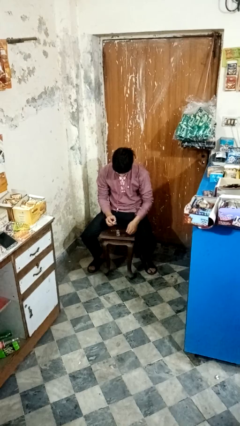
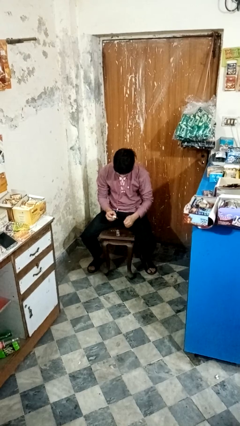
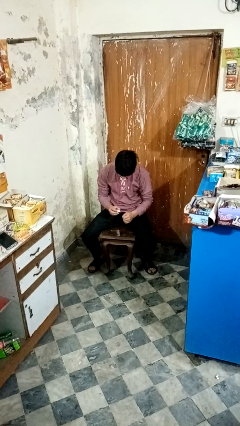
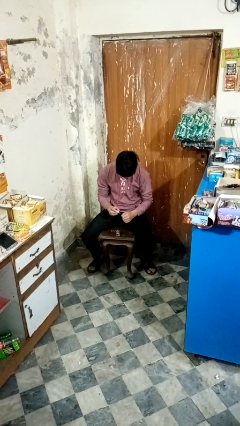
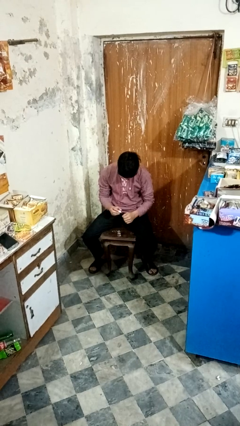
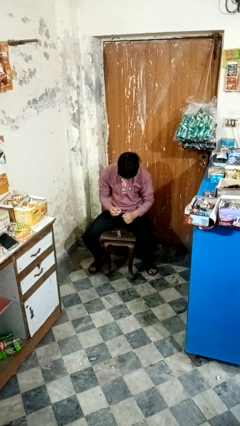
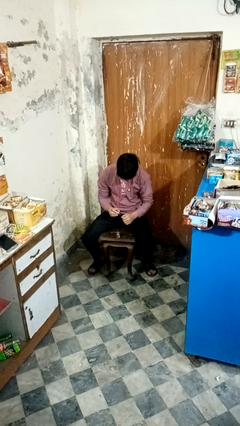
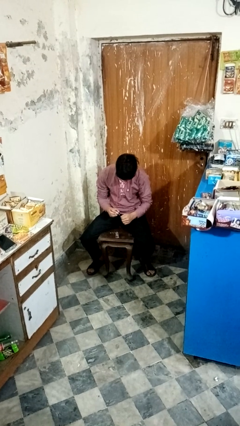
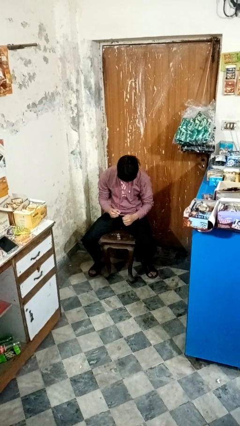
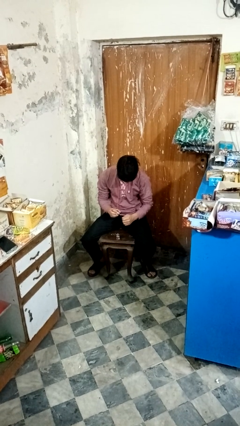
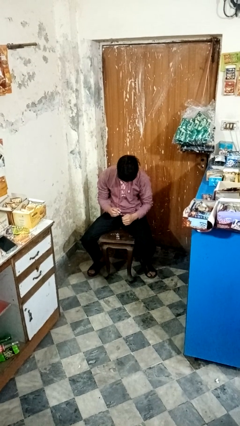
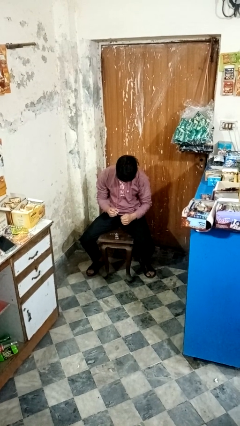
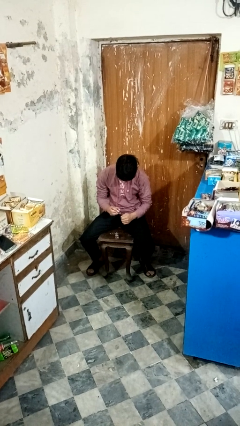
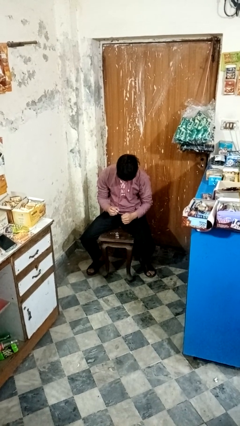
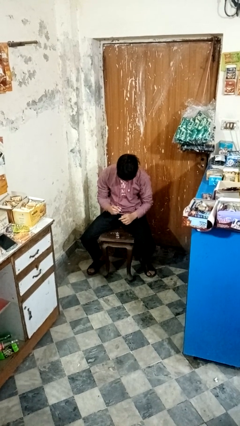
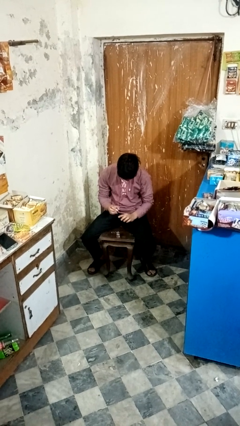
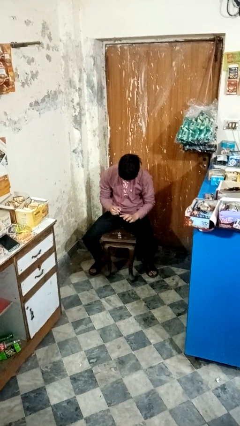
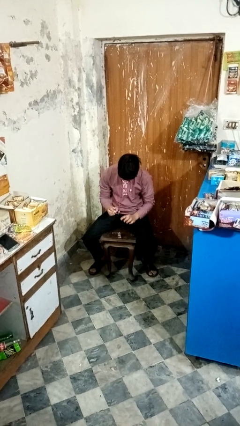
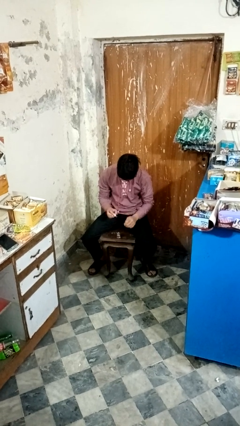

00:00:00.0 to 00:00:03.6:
person paints fingernails

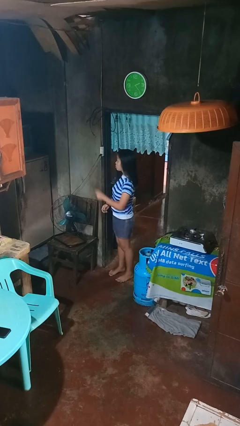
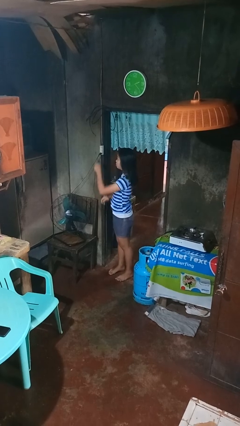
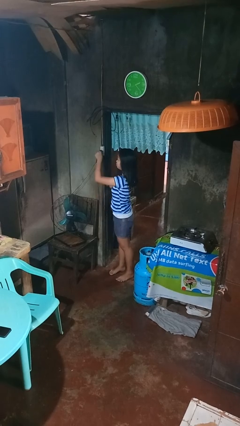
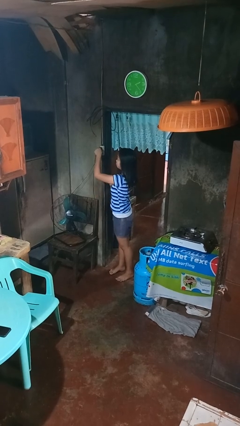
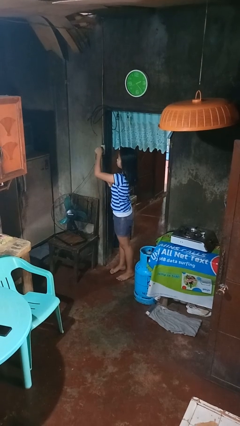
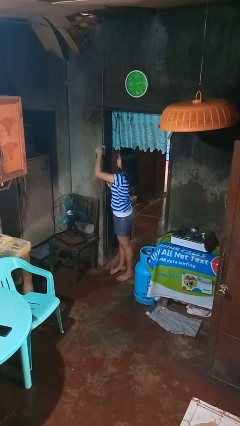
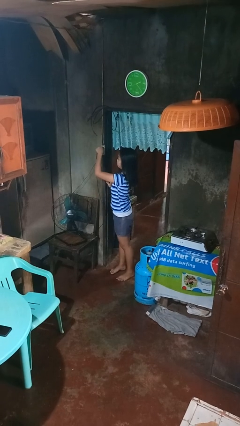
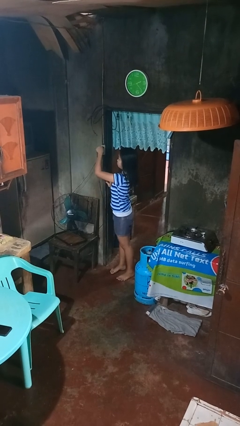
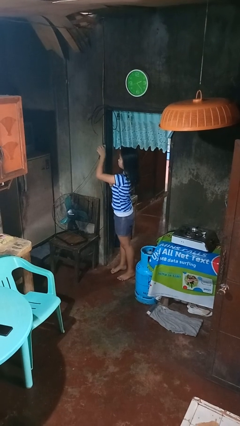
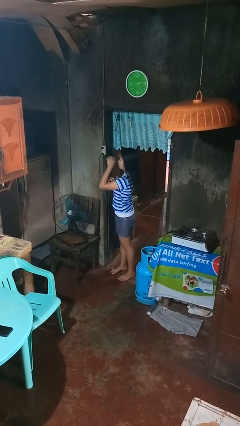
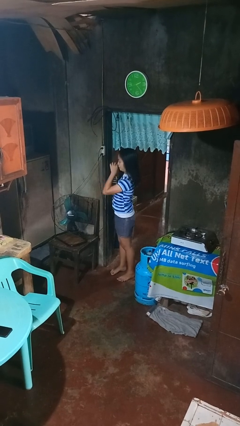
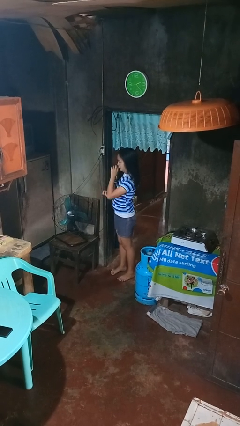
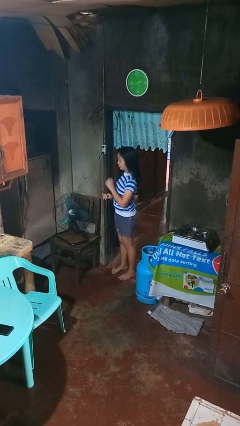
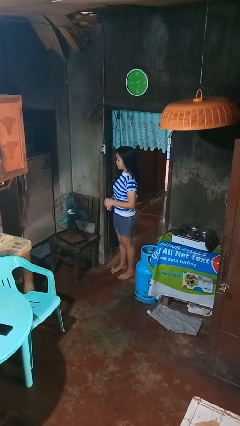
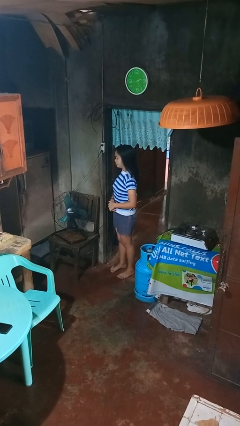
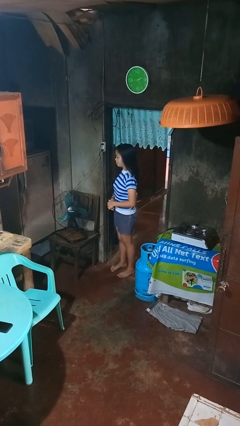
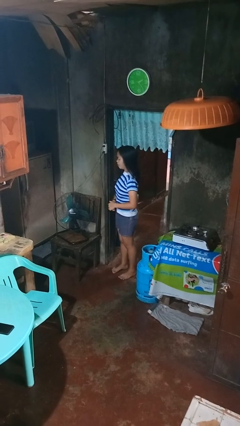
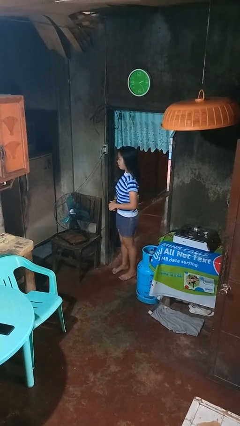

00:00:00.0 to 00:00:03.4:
person plugs into electrical socket

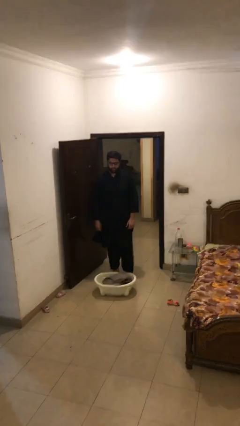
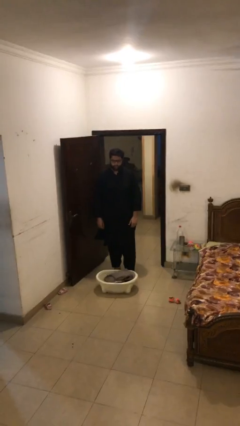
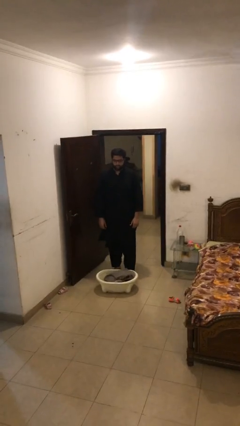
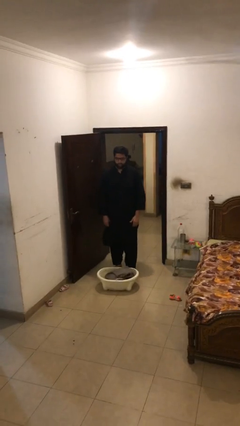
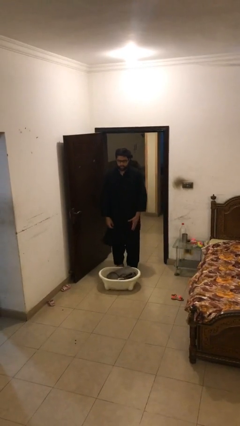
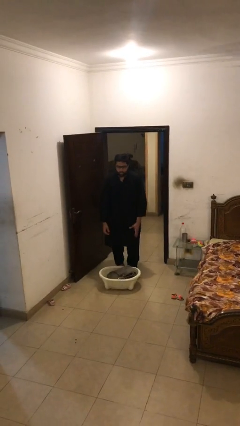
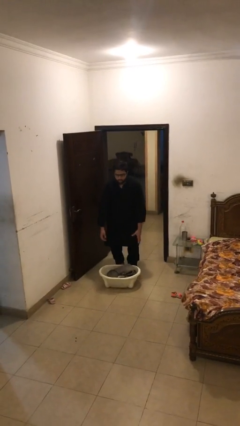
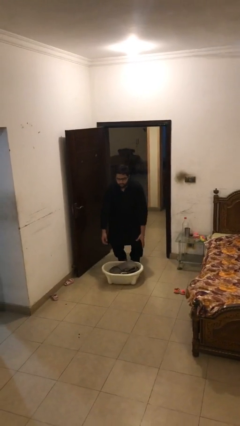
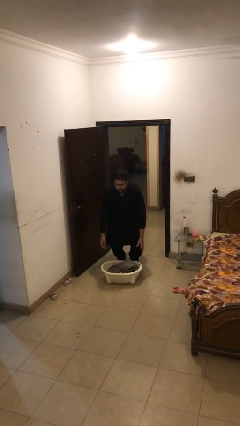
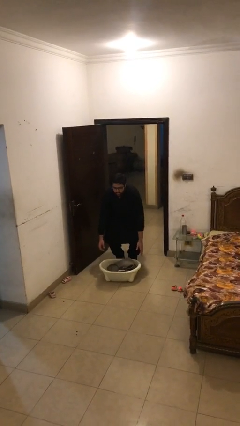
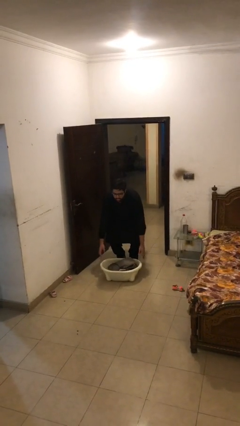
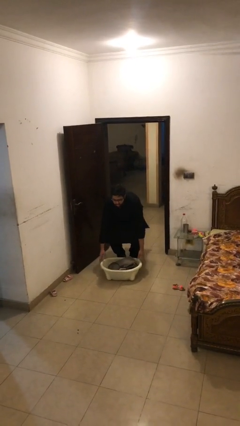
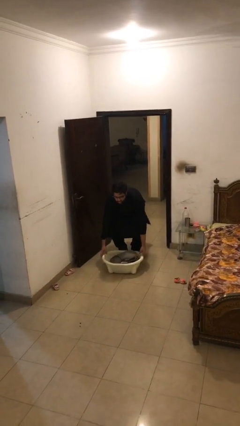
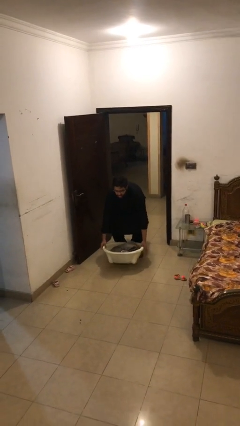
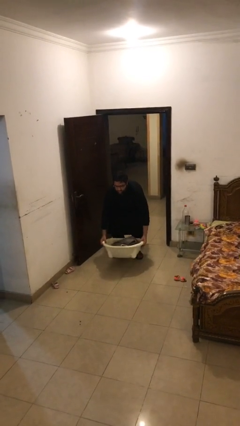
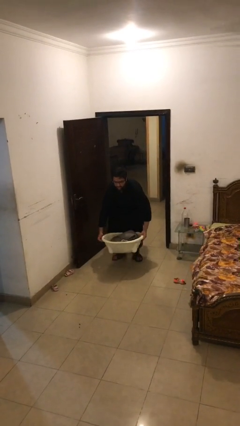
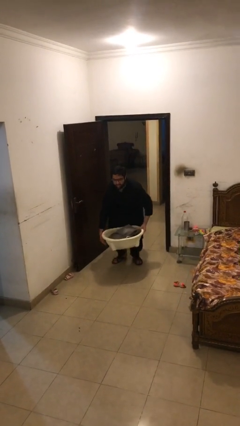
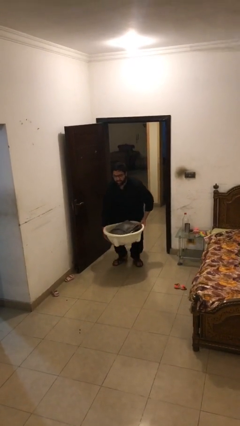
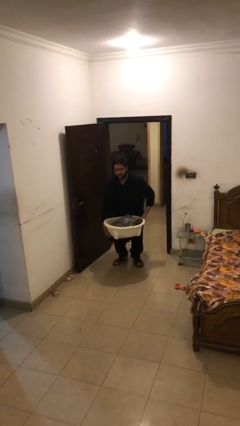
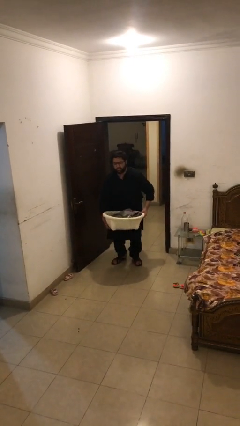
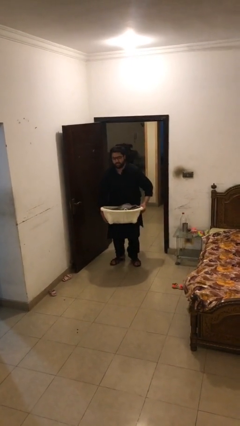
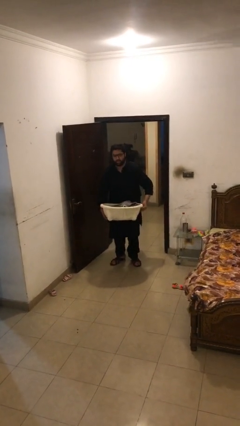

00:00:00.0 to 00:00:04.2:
person picks up object from floor

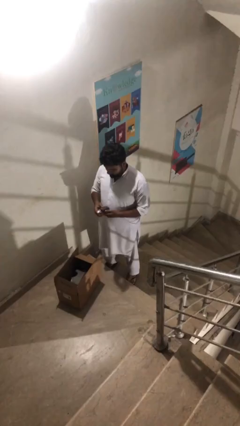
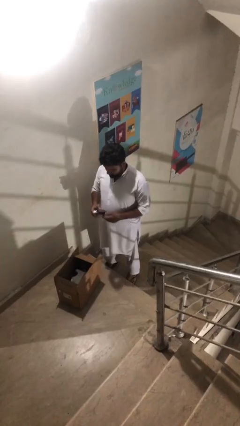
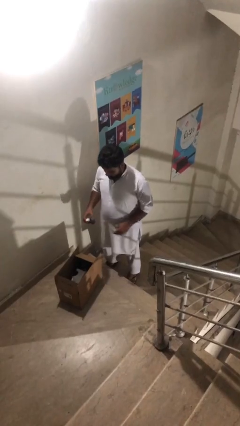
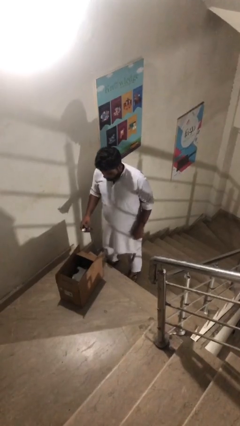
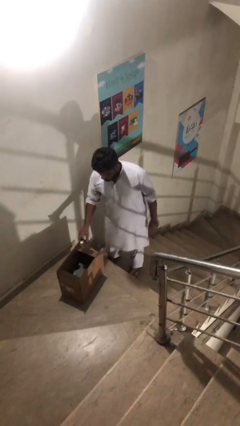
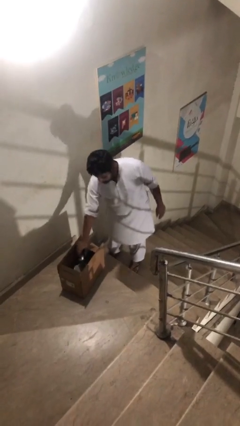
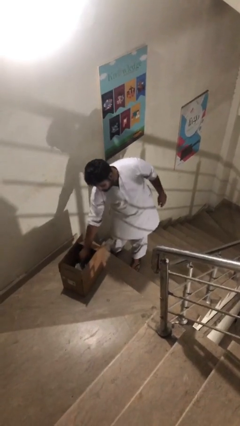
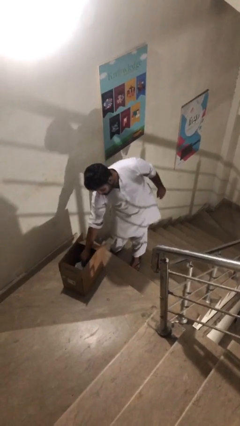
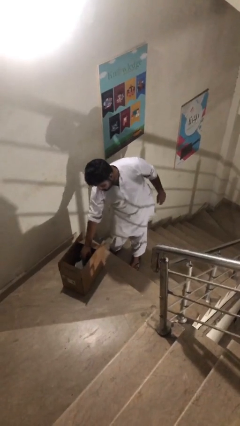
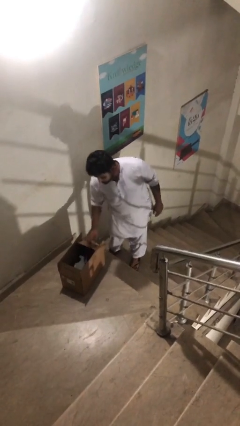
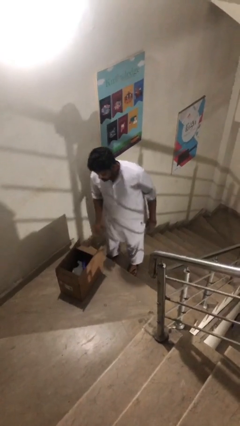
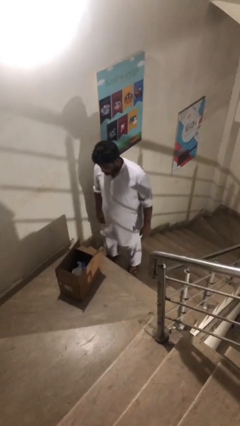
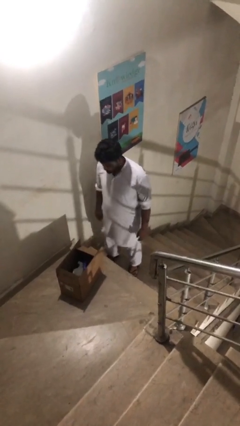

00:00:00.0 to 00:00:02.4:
person puts object into box

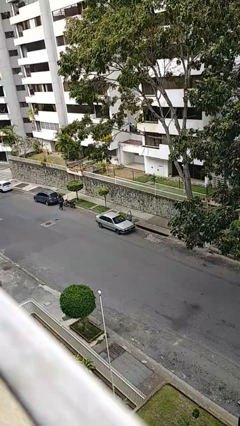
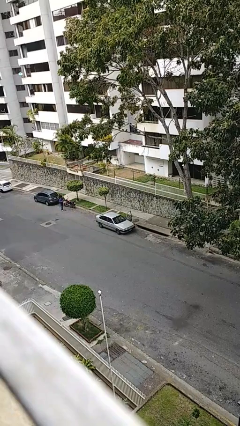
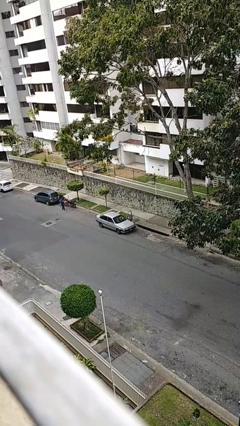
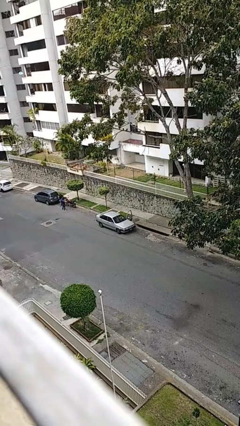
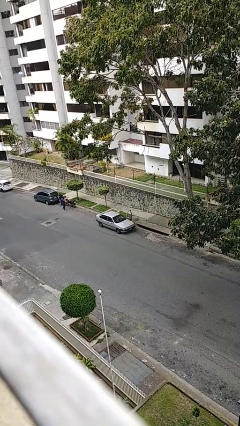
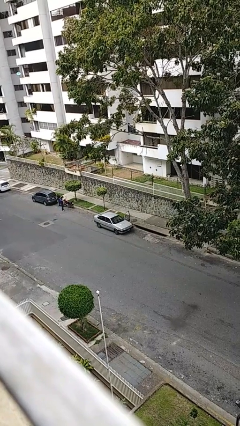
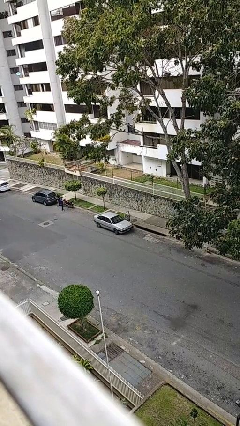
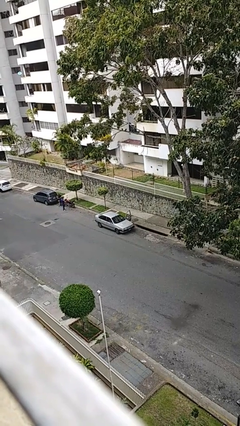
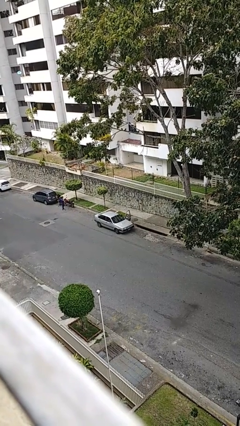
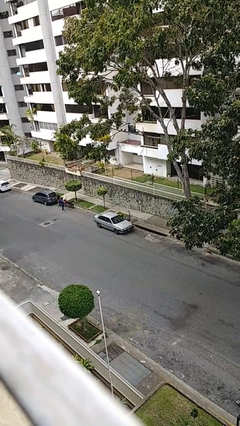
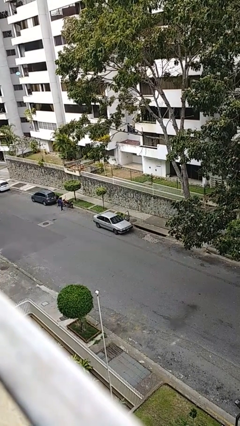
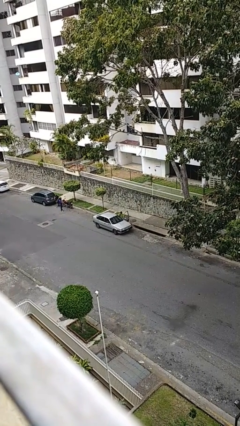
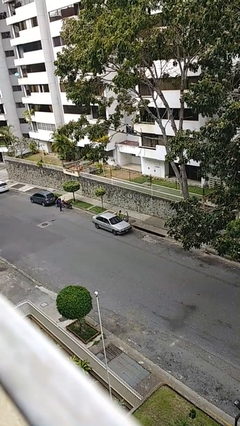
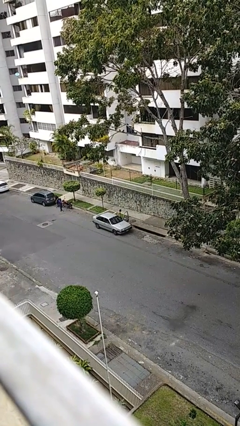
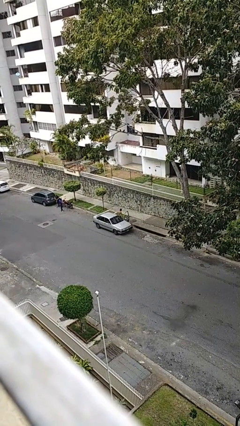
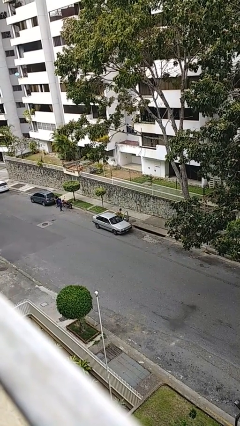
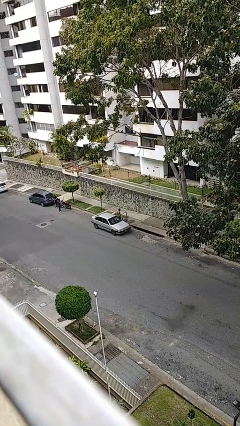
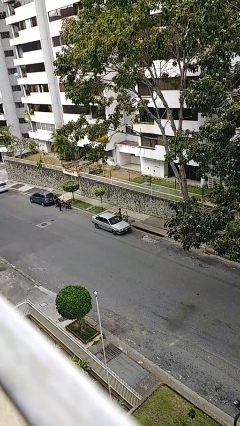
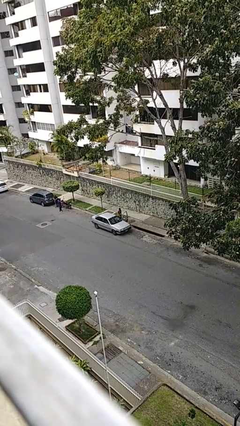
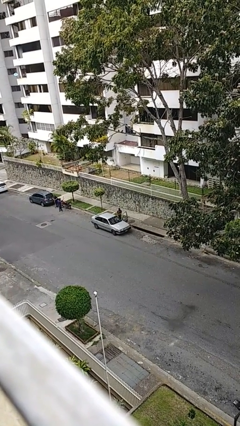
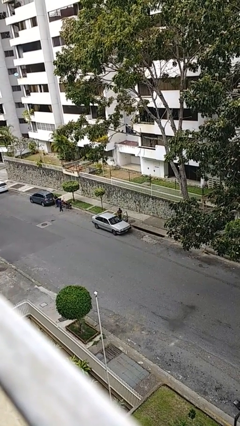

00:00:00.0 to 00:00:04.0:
person exits car
